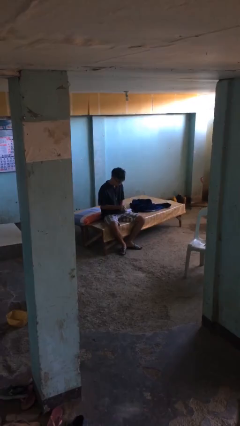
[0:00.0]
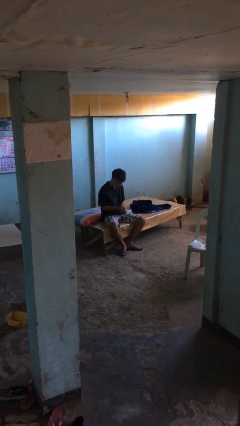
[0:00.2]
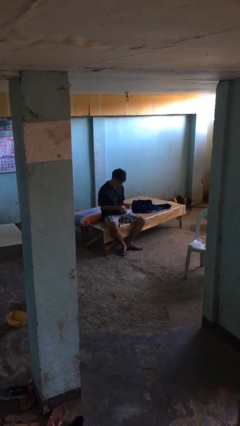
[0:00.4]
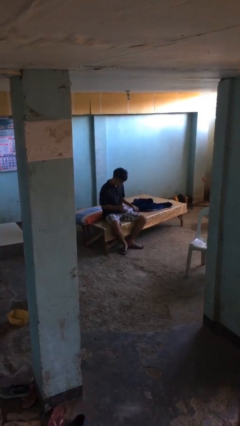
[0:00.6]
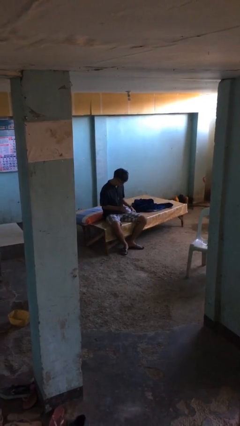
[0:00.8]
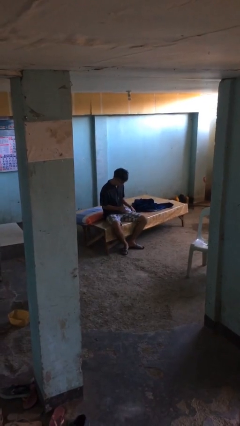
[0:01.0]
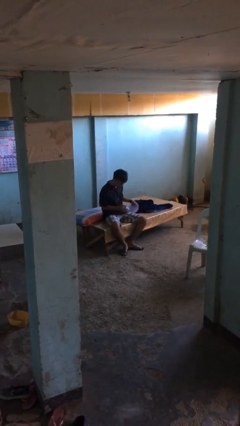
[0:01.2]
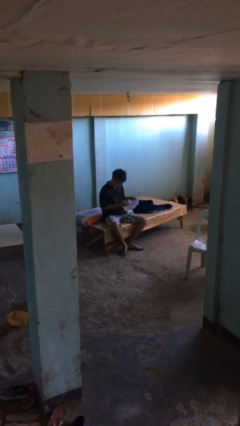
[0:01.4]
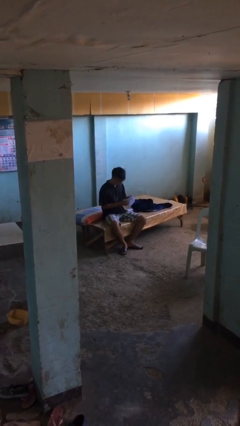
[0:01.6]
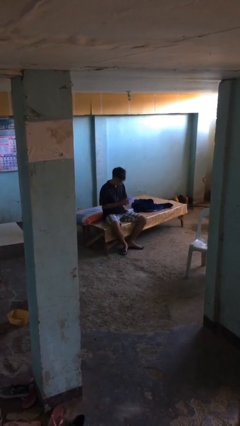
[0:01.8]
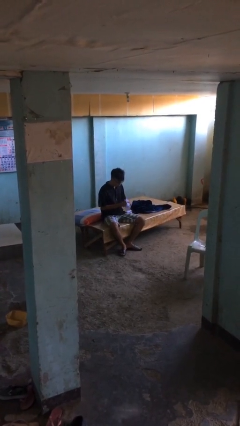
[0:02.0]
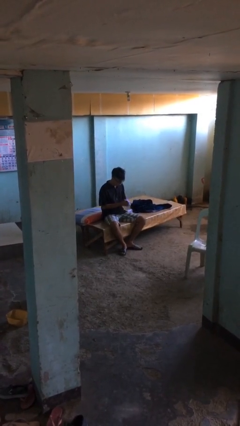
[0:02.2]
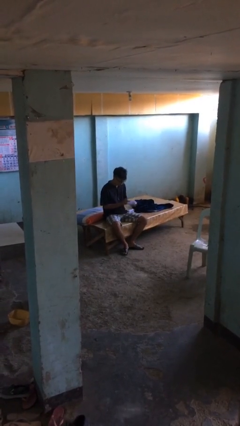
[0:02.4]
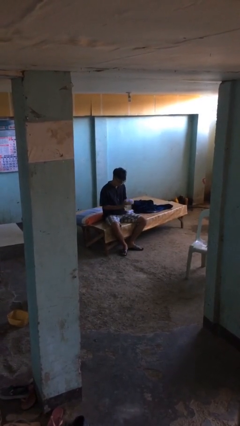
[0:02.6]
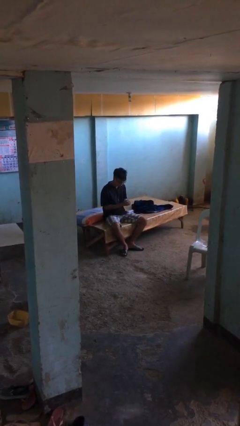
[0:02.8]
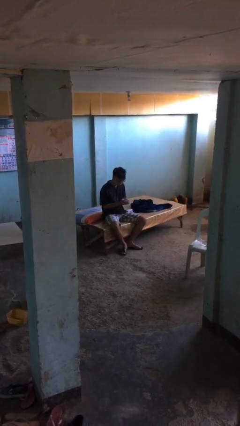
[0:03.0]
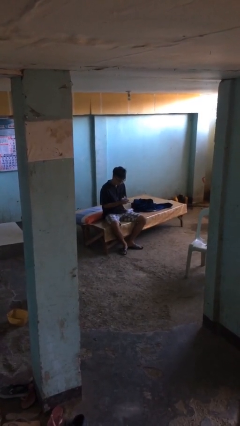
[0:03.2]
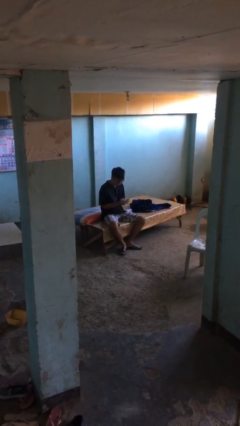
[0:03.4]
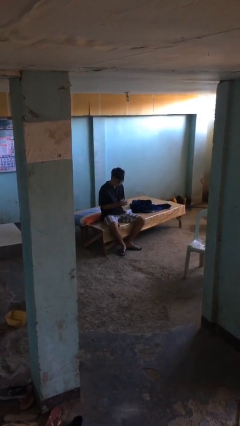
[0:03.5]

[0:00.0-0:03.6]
person crumples paper

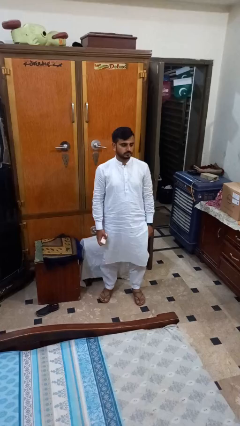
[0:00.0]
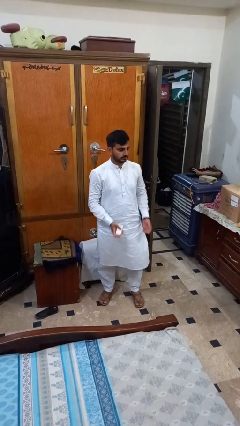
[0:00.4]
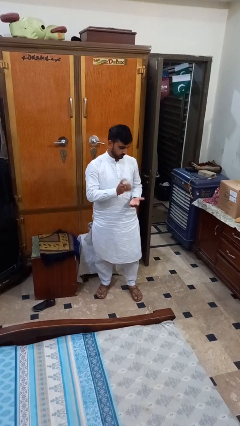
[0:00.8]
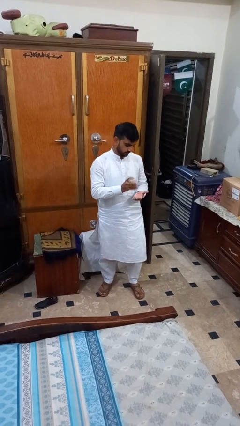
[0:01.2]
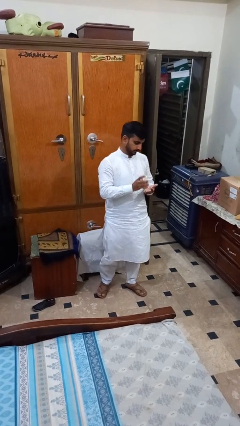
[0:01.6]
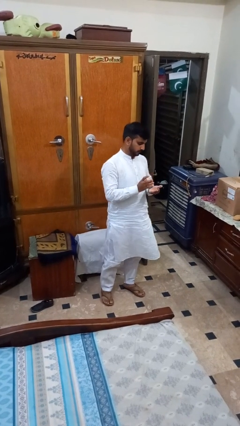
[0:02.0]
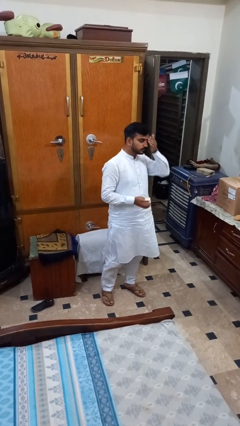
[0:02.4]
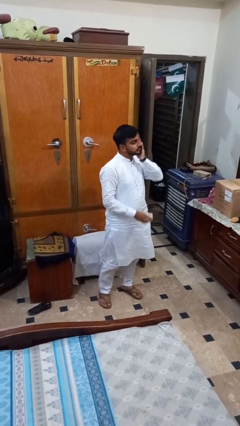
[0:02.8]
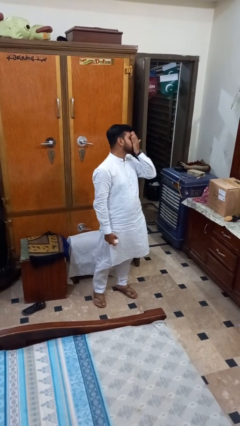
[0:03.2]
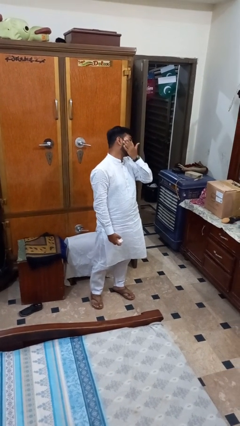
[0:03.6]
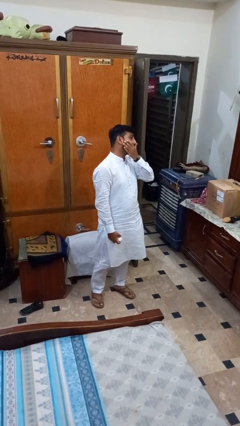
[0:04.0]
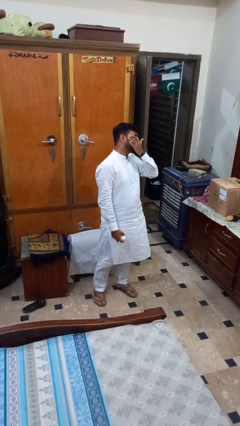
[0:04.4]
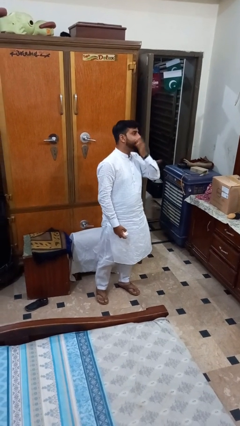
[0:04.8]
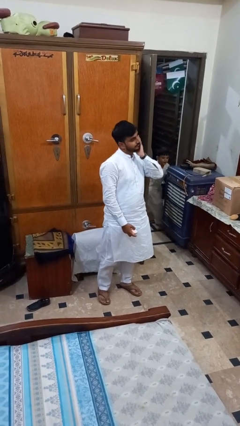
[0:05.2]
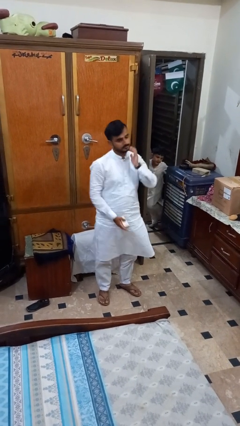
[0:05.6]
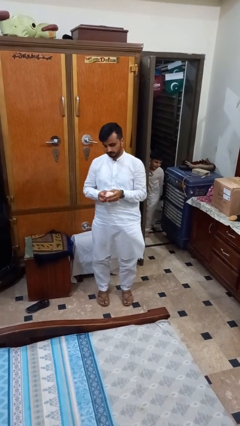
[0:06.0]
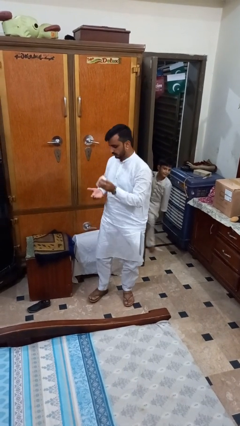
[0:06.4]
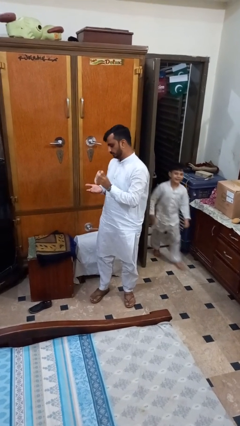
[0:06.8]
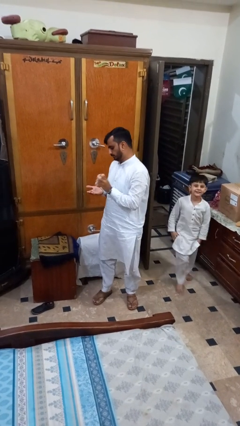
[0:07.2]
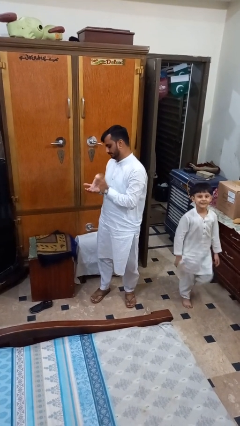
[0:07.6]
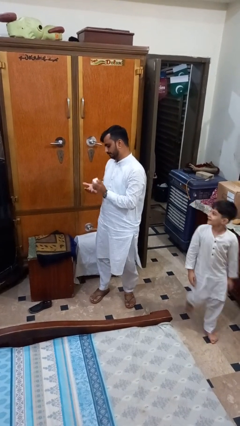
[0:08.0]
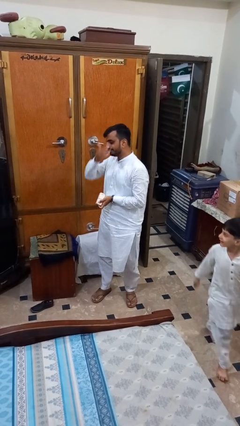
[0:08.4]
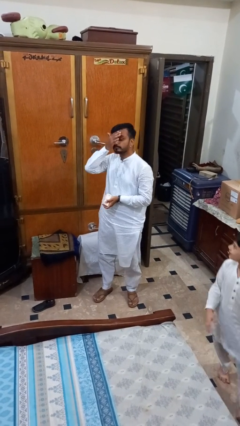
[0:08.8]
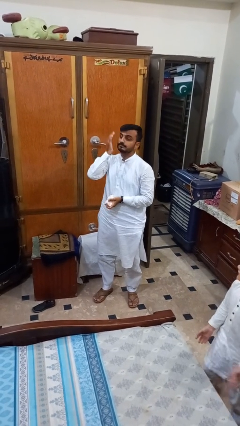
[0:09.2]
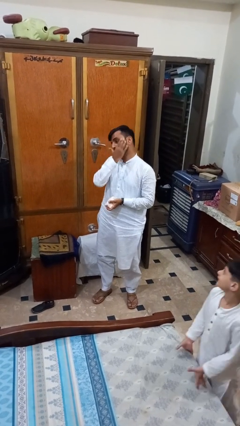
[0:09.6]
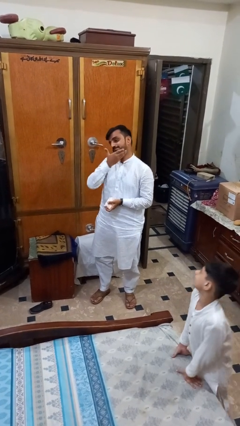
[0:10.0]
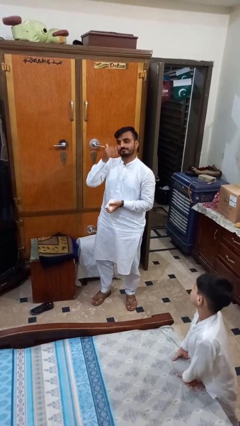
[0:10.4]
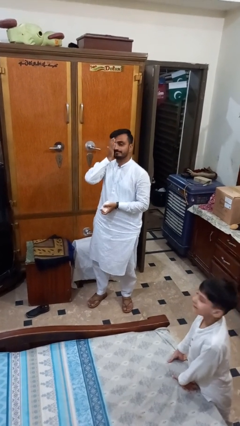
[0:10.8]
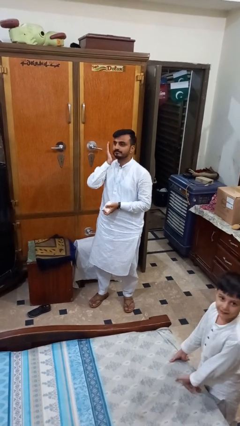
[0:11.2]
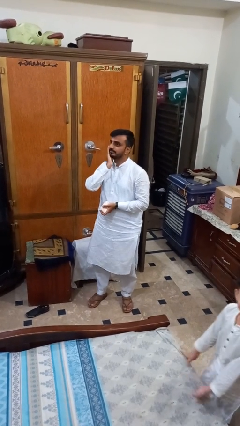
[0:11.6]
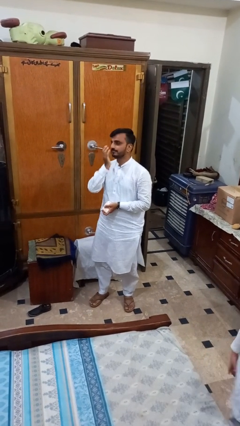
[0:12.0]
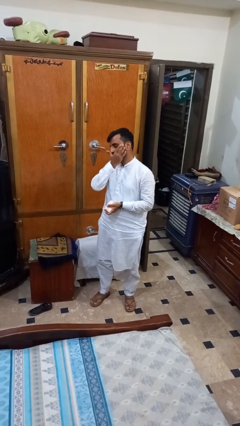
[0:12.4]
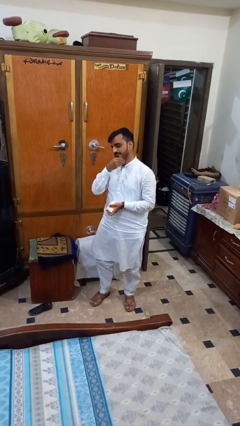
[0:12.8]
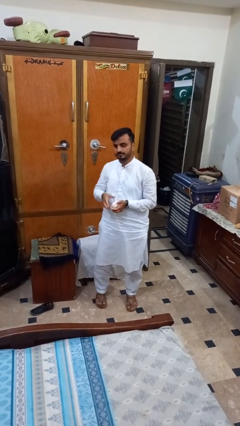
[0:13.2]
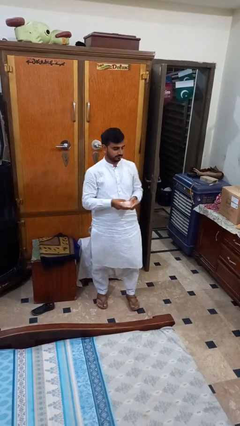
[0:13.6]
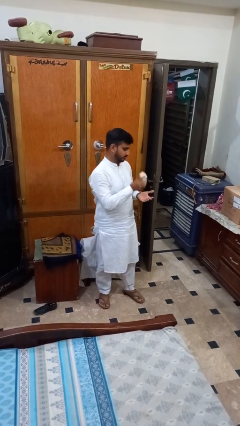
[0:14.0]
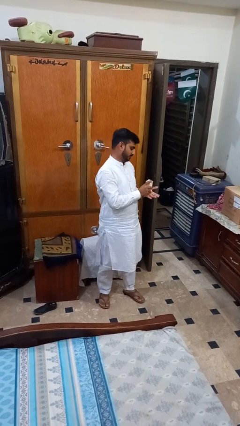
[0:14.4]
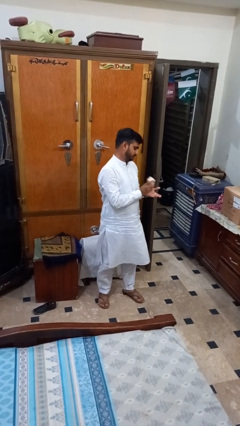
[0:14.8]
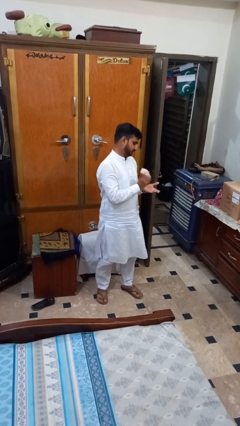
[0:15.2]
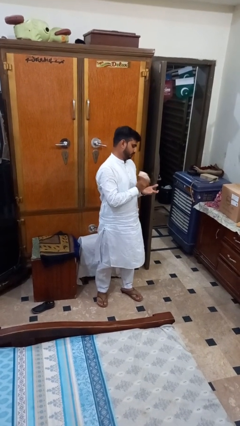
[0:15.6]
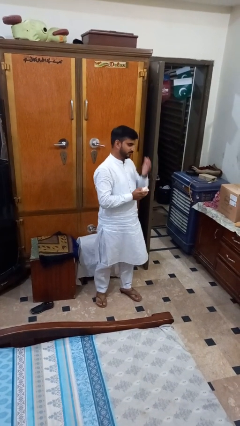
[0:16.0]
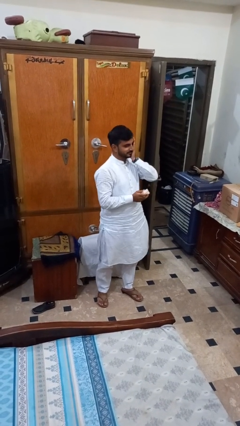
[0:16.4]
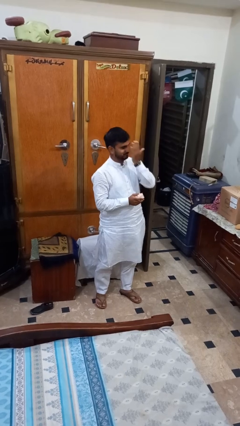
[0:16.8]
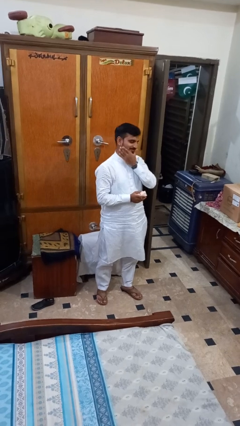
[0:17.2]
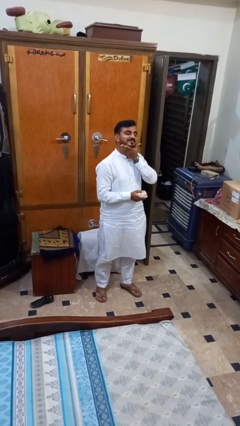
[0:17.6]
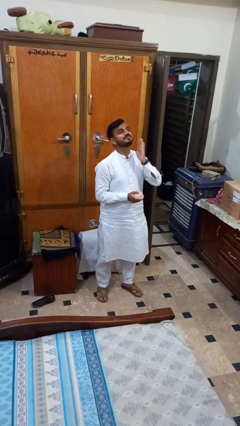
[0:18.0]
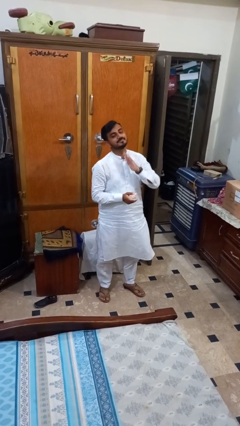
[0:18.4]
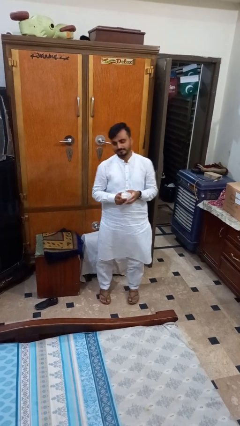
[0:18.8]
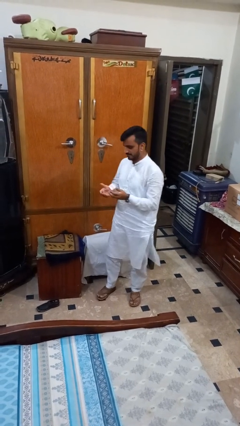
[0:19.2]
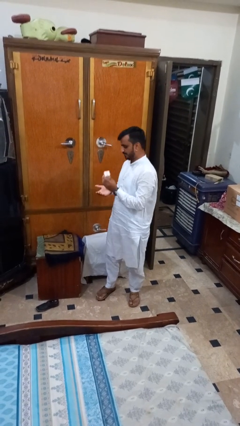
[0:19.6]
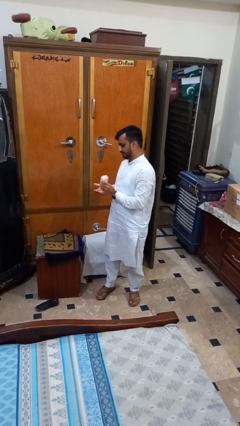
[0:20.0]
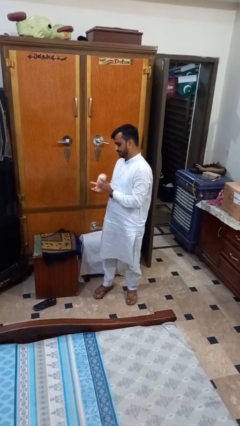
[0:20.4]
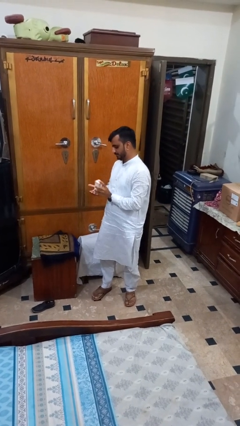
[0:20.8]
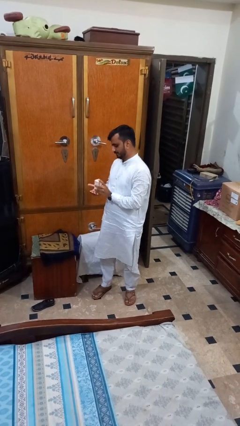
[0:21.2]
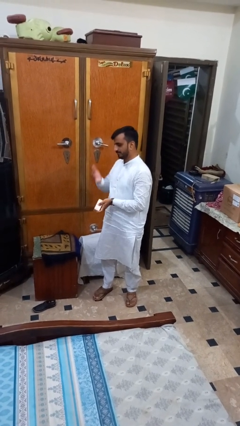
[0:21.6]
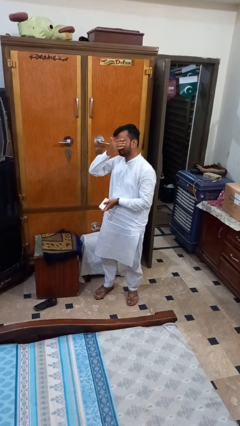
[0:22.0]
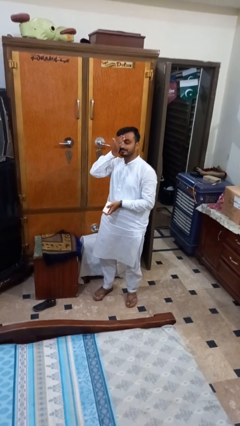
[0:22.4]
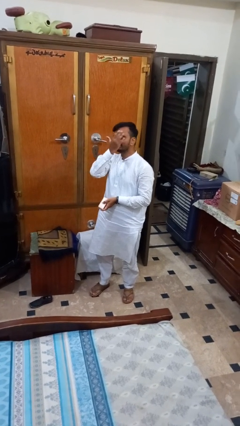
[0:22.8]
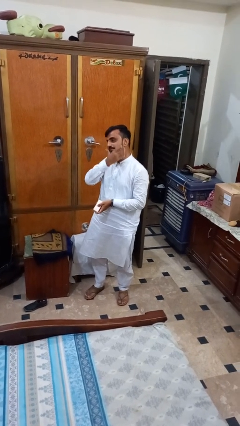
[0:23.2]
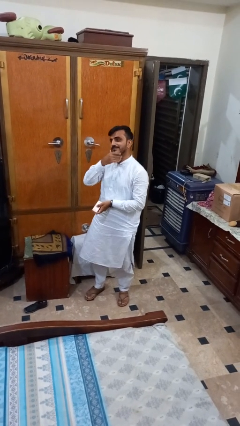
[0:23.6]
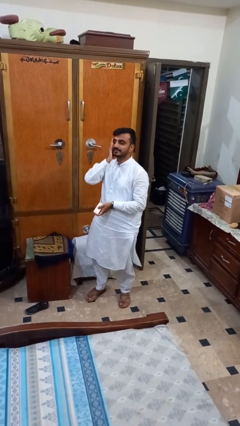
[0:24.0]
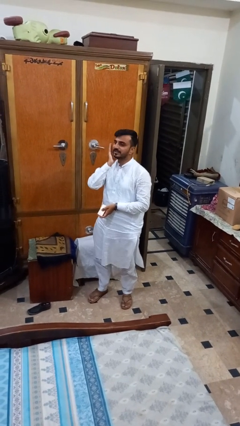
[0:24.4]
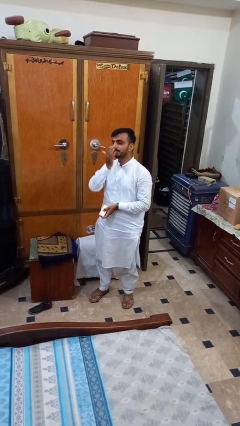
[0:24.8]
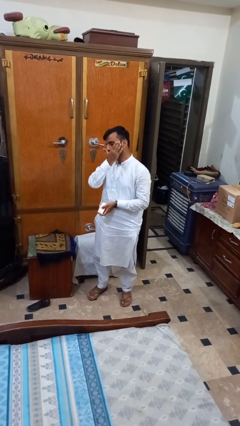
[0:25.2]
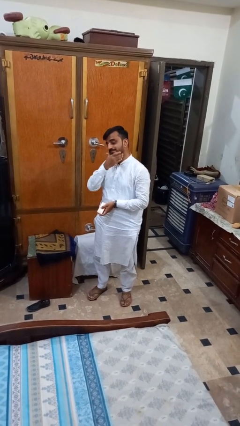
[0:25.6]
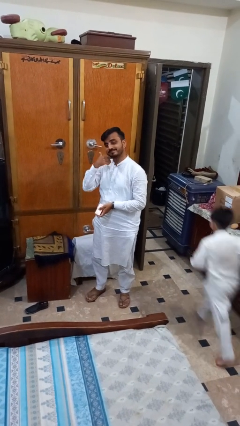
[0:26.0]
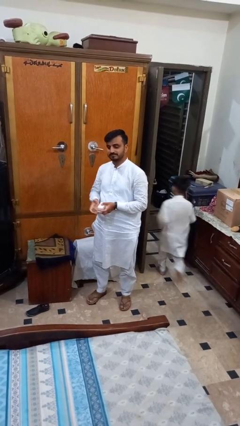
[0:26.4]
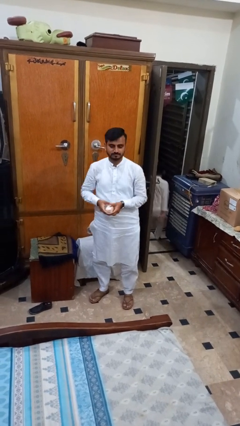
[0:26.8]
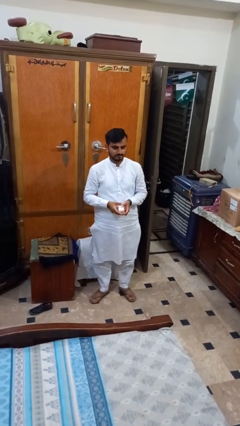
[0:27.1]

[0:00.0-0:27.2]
person applies facial moisturizer

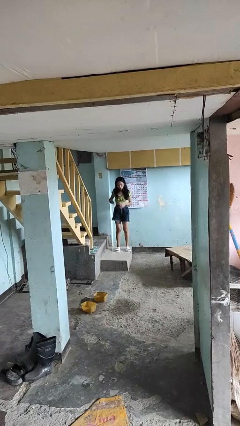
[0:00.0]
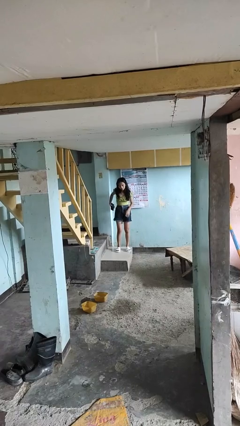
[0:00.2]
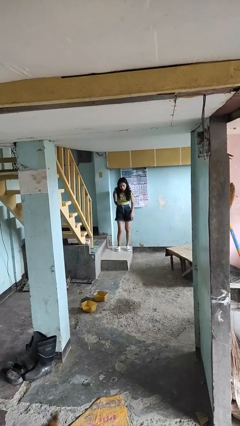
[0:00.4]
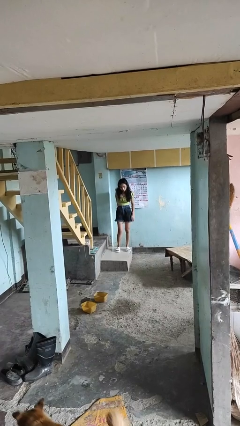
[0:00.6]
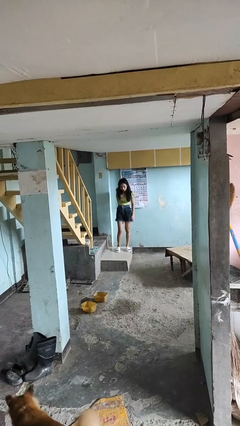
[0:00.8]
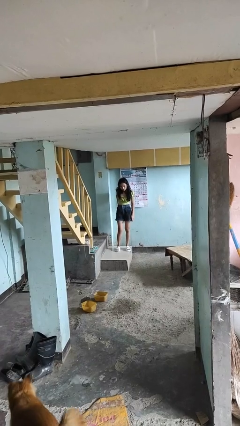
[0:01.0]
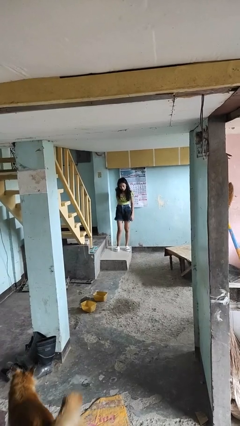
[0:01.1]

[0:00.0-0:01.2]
person puts phone into pocket
